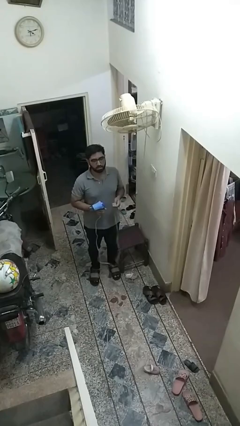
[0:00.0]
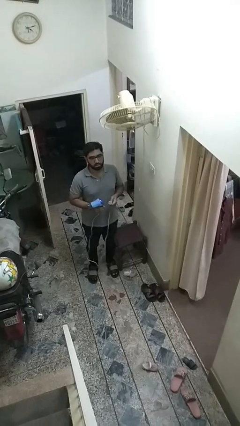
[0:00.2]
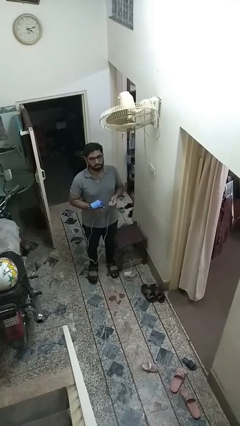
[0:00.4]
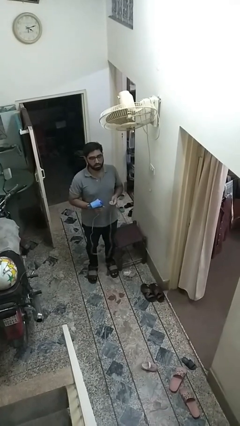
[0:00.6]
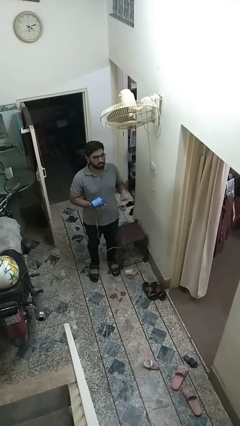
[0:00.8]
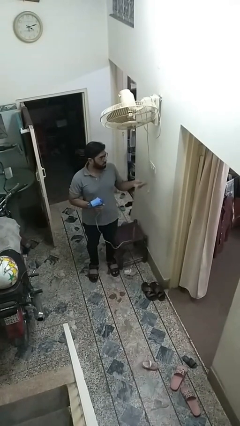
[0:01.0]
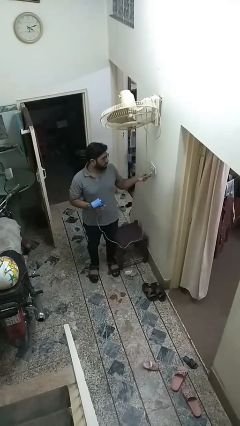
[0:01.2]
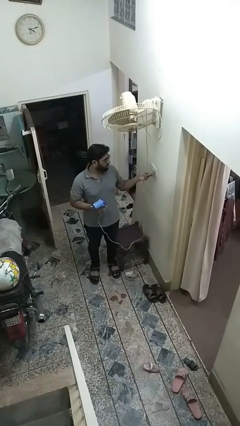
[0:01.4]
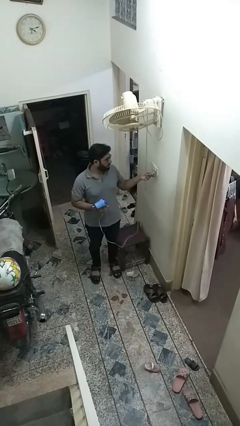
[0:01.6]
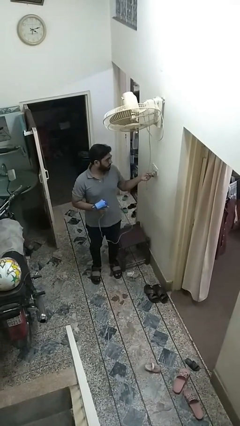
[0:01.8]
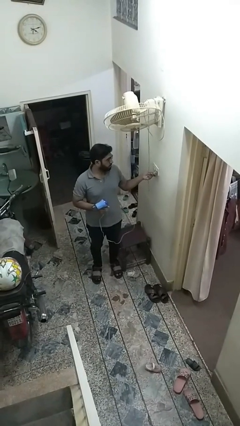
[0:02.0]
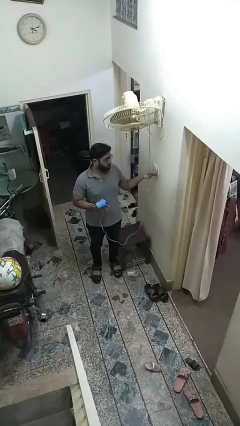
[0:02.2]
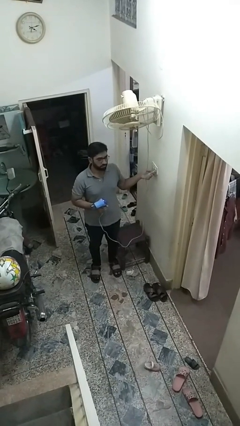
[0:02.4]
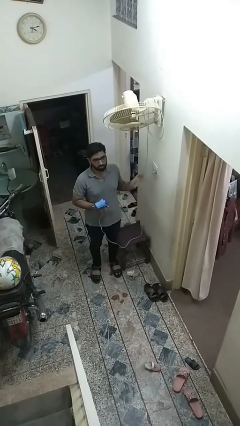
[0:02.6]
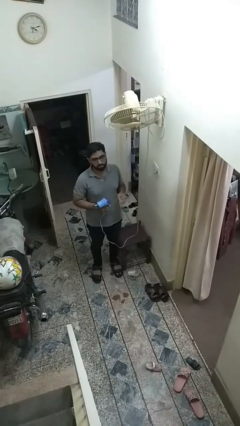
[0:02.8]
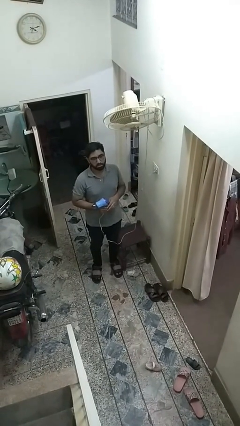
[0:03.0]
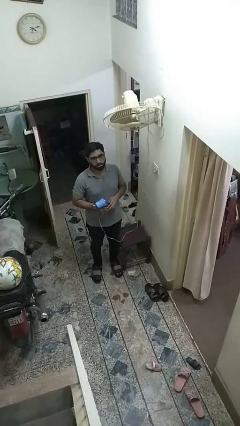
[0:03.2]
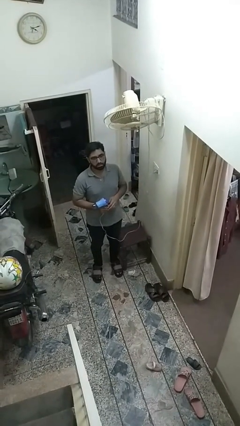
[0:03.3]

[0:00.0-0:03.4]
person plugs into electrical socket

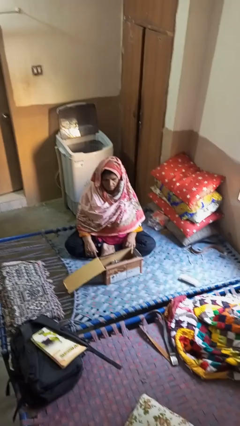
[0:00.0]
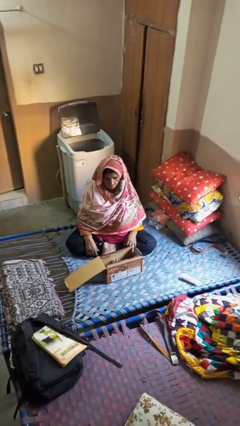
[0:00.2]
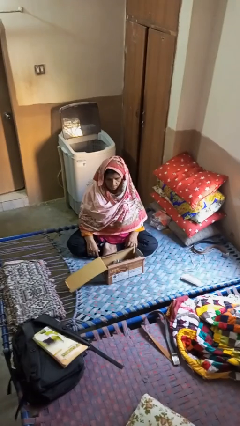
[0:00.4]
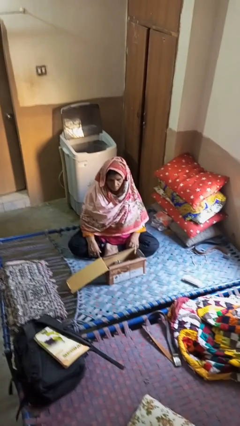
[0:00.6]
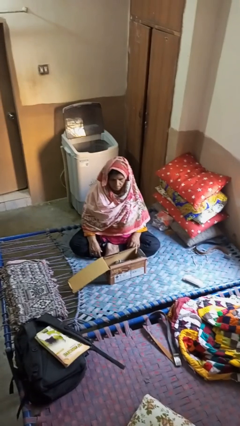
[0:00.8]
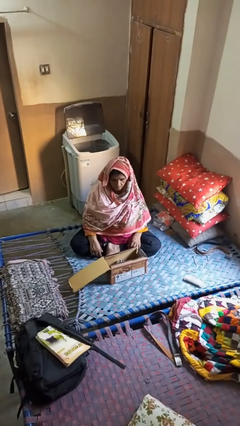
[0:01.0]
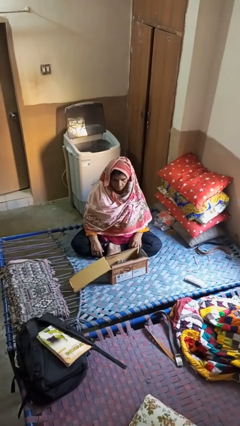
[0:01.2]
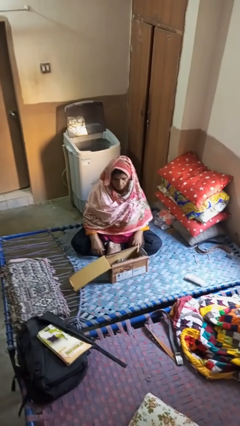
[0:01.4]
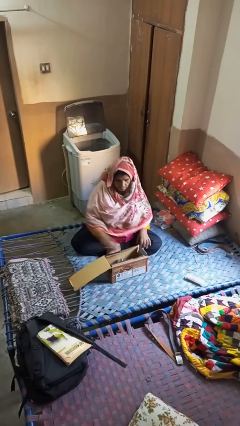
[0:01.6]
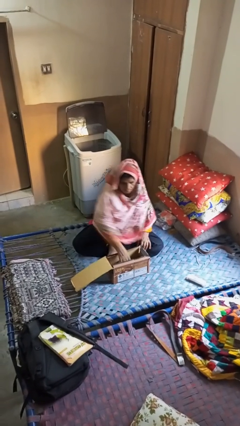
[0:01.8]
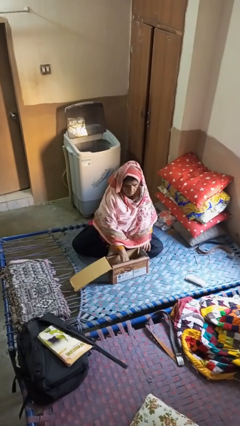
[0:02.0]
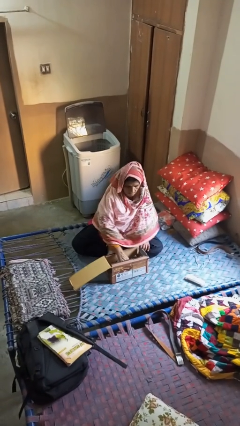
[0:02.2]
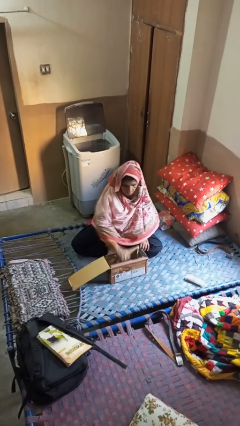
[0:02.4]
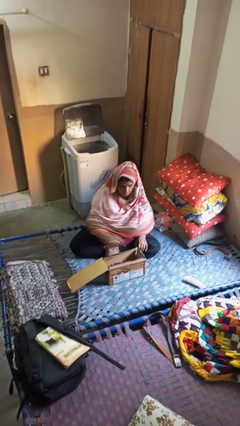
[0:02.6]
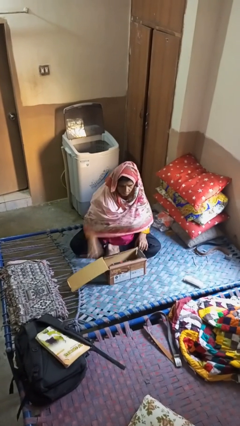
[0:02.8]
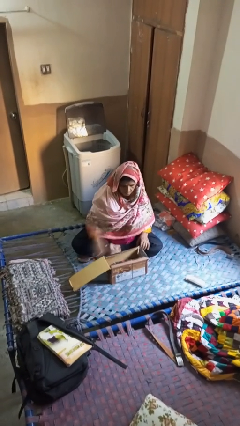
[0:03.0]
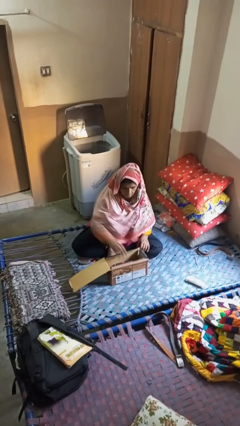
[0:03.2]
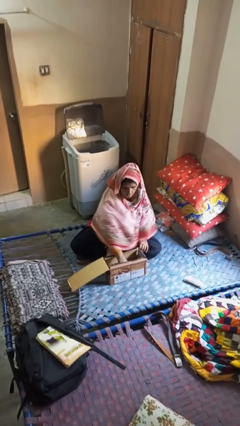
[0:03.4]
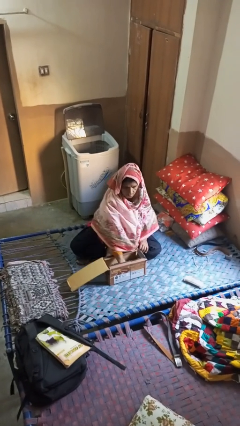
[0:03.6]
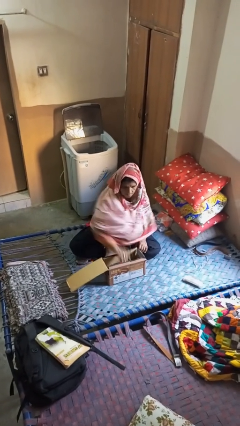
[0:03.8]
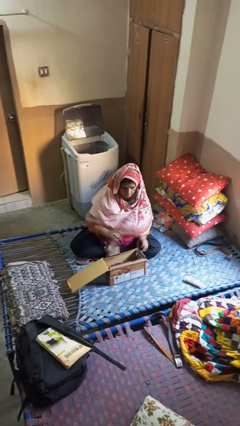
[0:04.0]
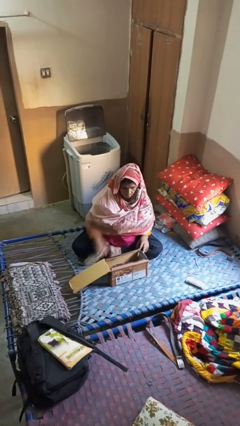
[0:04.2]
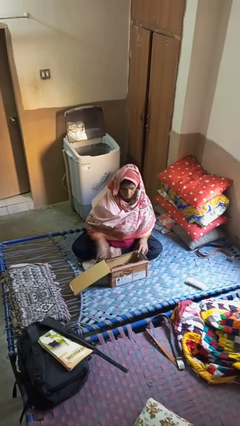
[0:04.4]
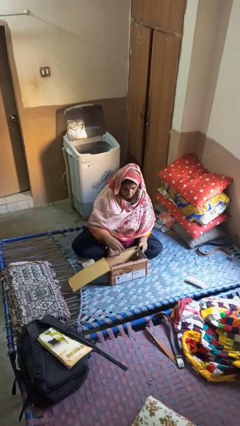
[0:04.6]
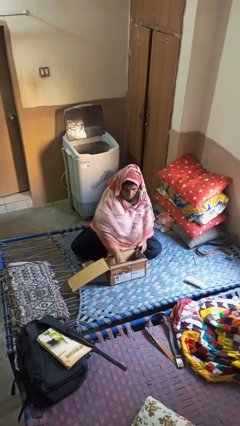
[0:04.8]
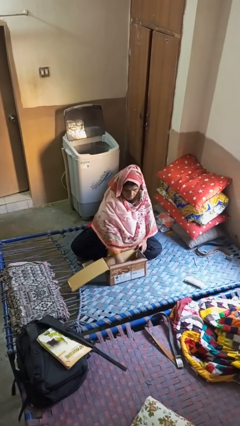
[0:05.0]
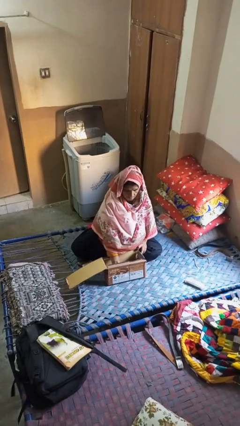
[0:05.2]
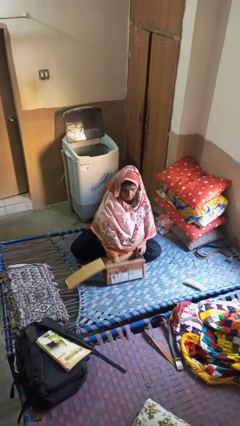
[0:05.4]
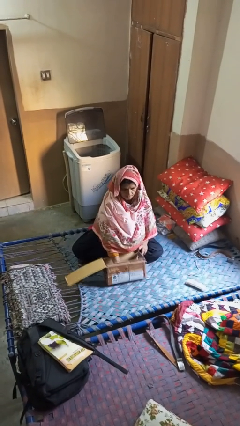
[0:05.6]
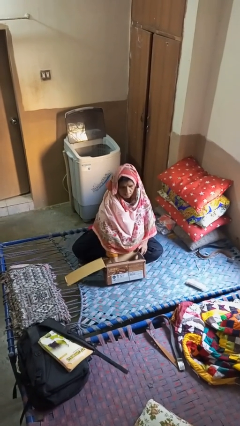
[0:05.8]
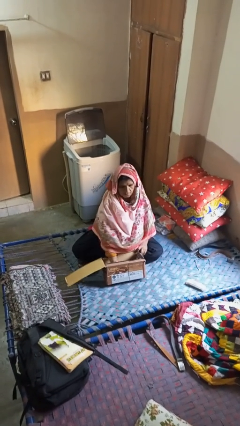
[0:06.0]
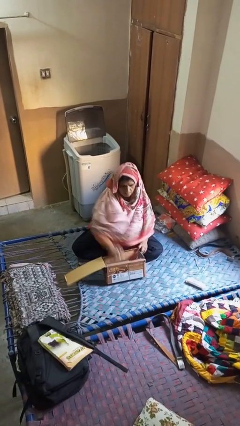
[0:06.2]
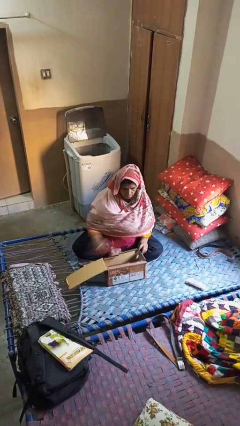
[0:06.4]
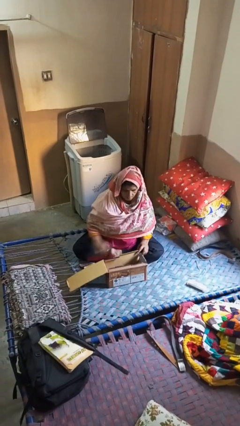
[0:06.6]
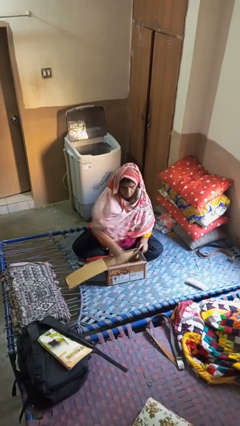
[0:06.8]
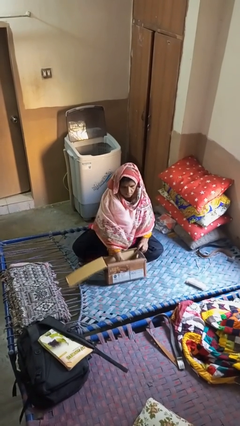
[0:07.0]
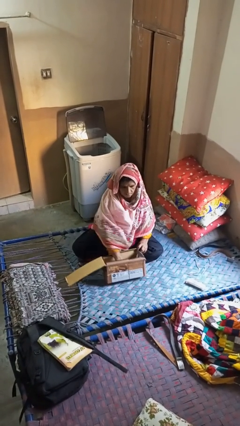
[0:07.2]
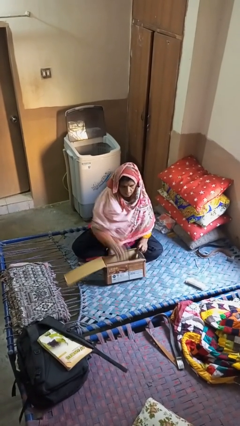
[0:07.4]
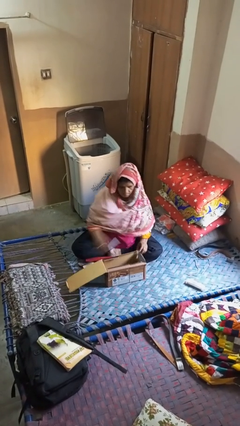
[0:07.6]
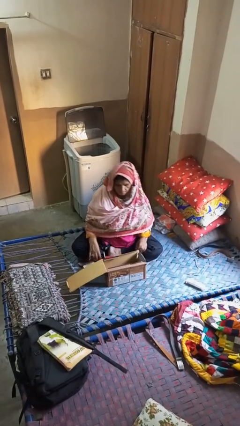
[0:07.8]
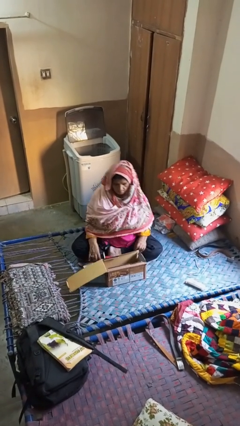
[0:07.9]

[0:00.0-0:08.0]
person takes object from box

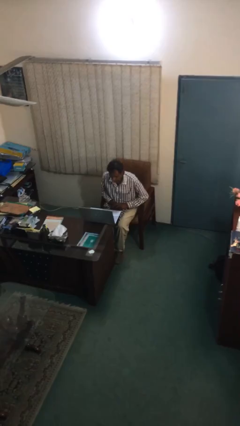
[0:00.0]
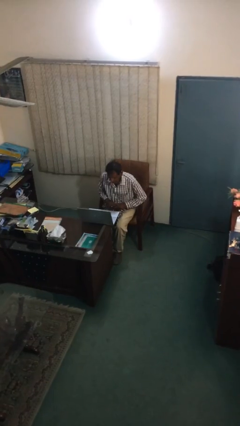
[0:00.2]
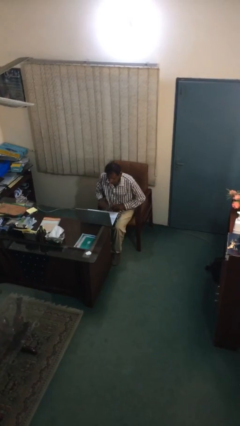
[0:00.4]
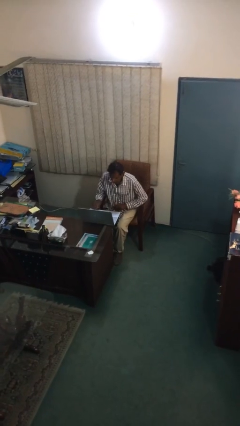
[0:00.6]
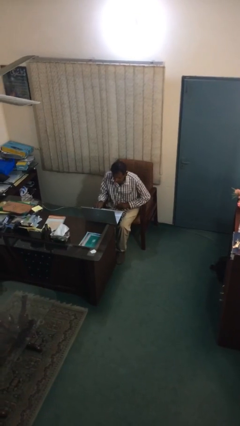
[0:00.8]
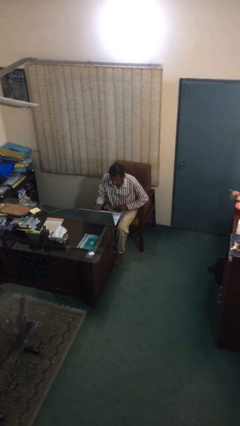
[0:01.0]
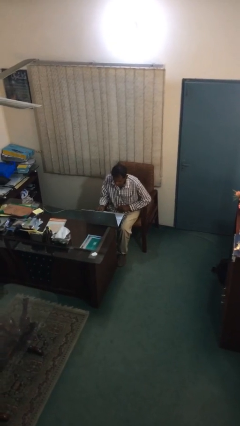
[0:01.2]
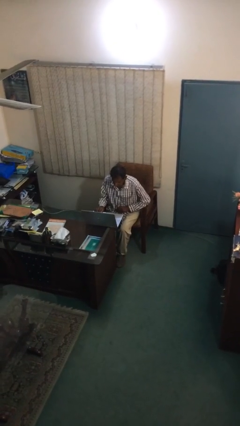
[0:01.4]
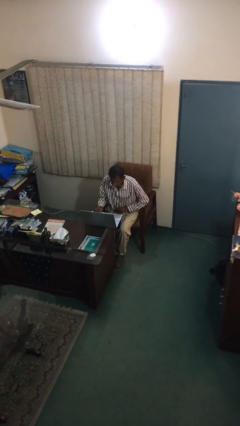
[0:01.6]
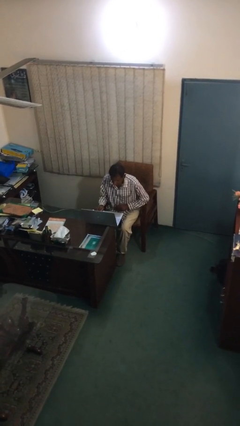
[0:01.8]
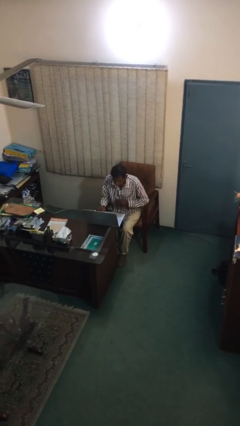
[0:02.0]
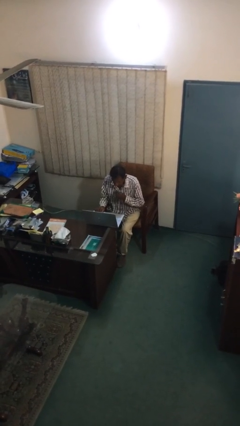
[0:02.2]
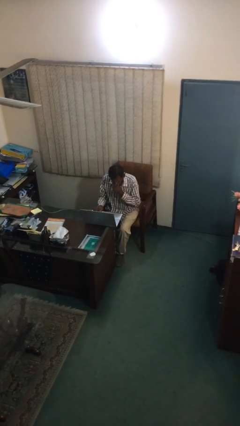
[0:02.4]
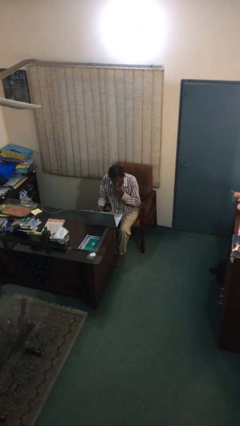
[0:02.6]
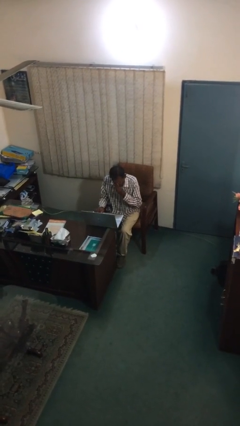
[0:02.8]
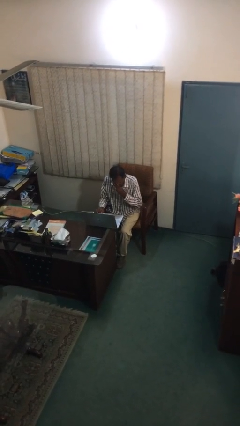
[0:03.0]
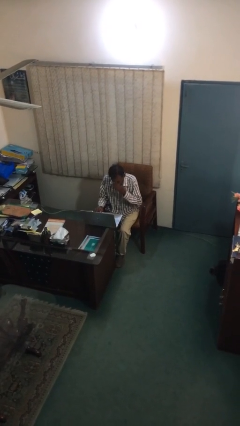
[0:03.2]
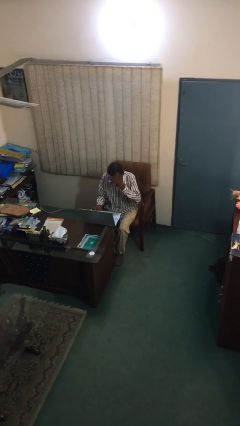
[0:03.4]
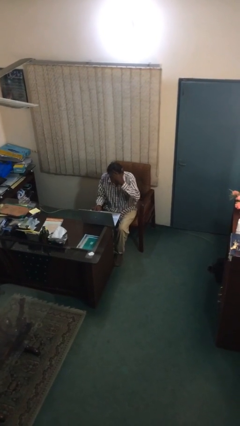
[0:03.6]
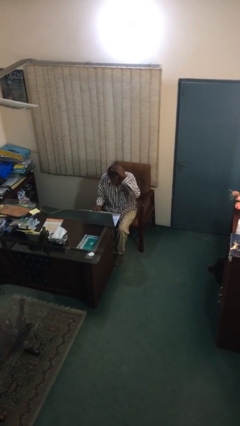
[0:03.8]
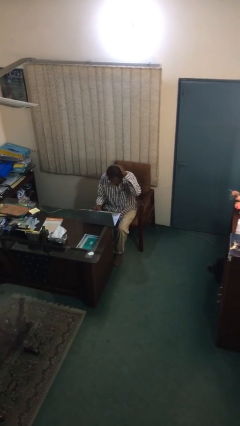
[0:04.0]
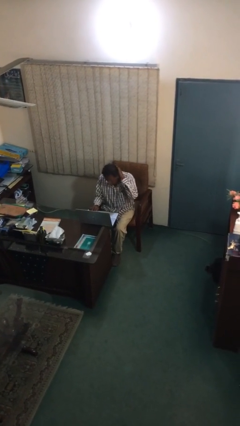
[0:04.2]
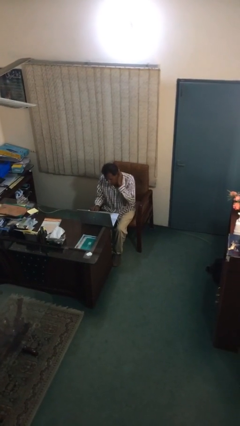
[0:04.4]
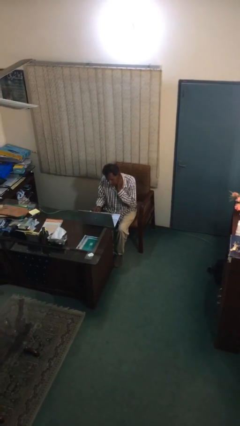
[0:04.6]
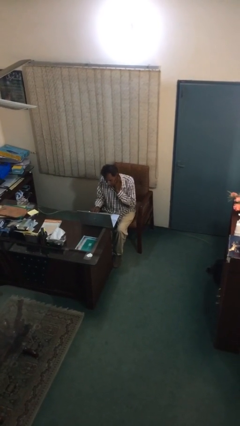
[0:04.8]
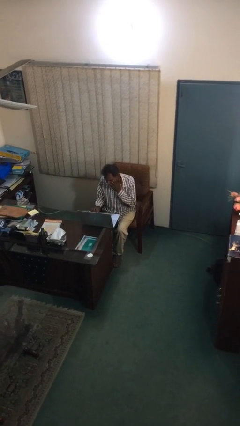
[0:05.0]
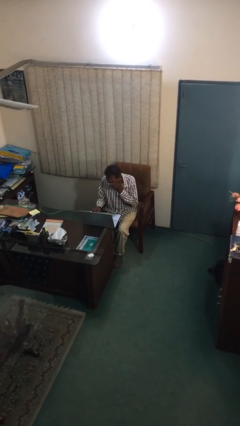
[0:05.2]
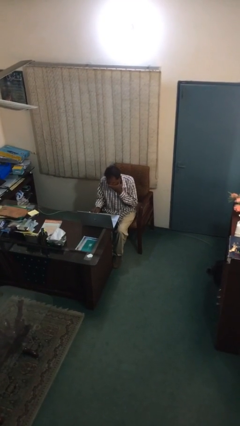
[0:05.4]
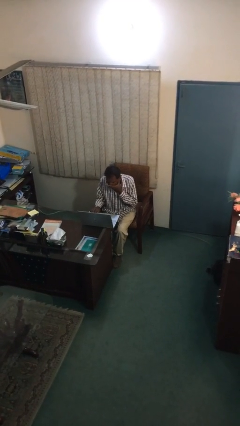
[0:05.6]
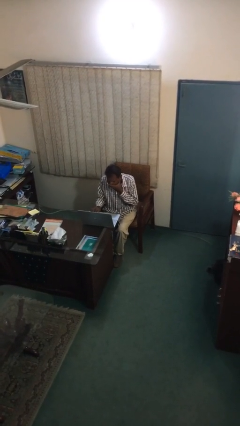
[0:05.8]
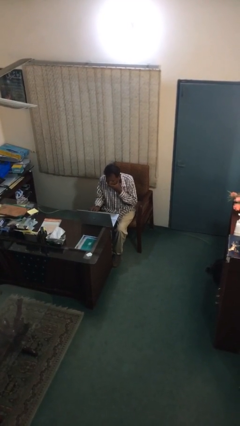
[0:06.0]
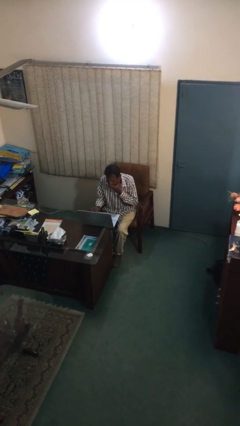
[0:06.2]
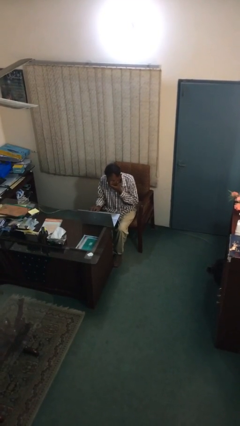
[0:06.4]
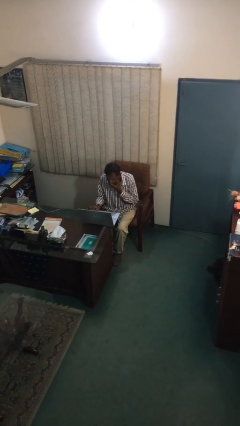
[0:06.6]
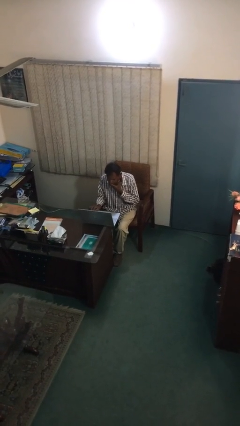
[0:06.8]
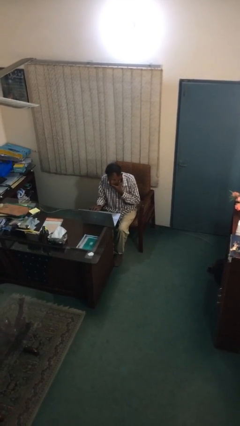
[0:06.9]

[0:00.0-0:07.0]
person interacts with laptop
